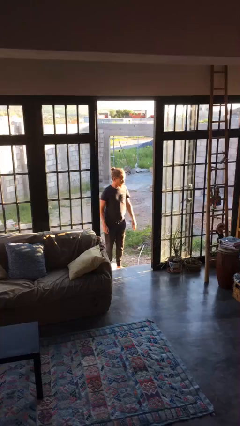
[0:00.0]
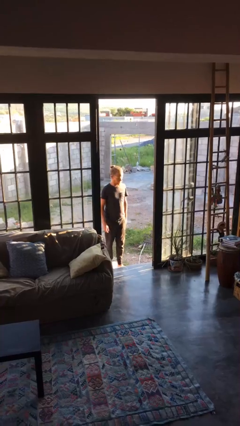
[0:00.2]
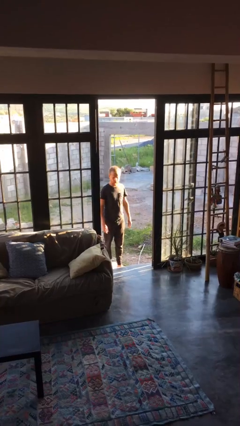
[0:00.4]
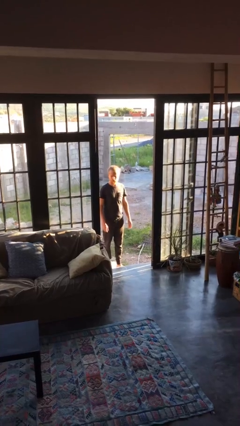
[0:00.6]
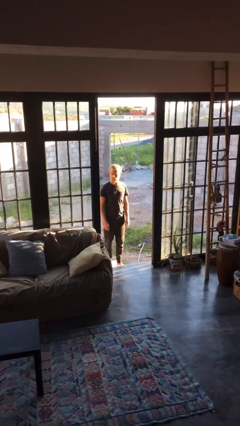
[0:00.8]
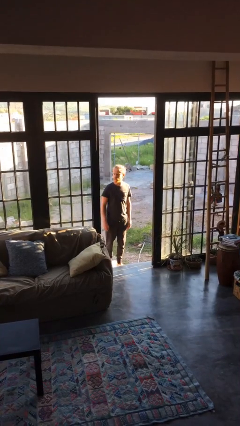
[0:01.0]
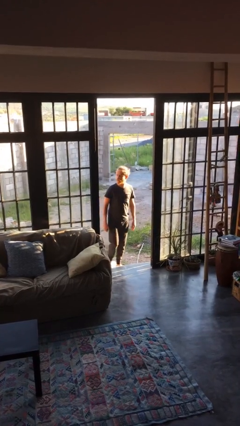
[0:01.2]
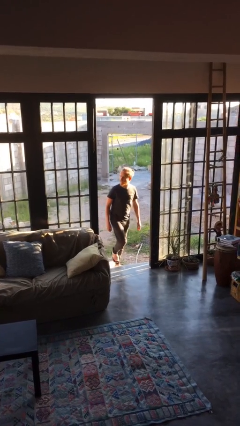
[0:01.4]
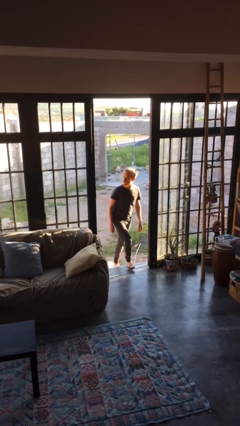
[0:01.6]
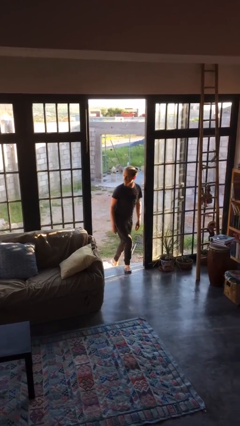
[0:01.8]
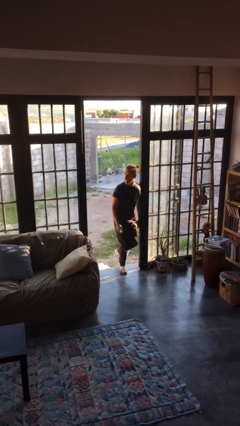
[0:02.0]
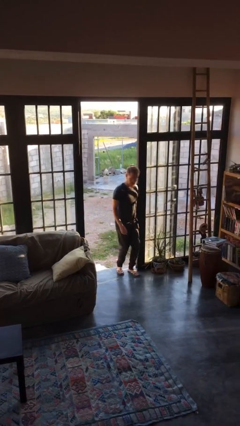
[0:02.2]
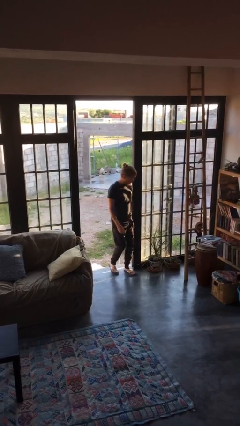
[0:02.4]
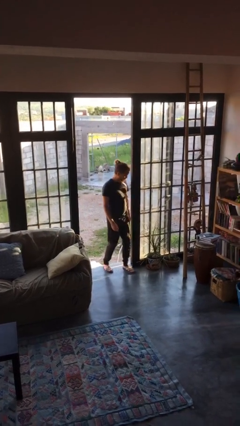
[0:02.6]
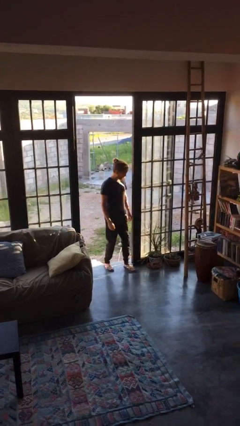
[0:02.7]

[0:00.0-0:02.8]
person bumps into wall

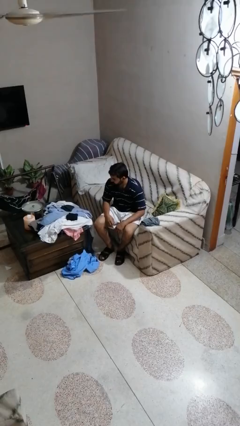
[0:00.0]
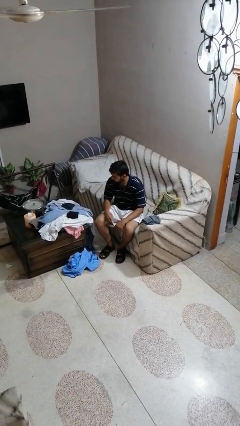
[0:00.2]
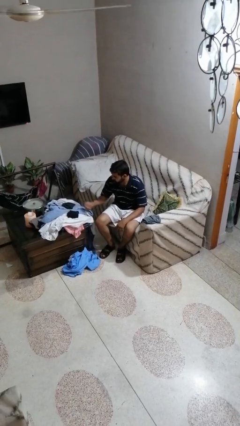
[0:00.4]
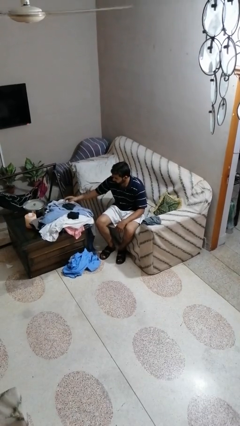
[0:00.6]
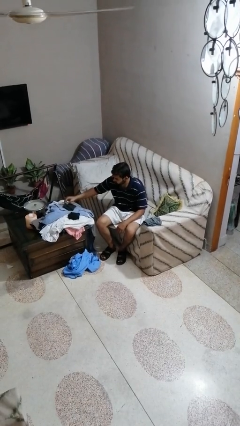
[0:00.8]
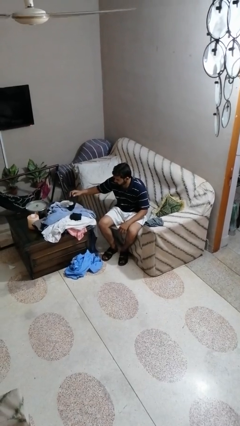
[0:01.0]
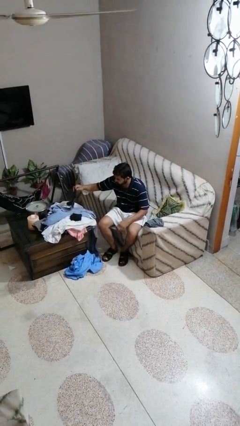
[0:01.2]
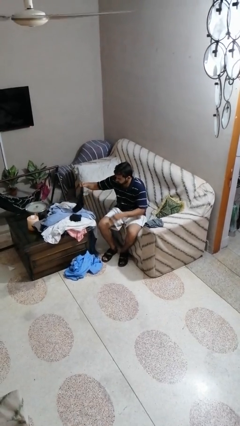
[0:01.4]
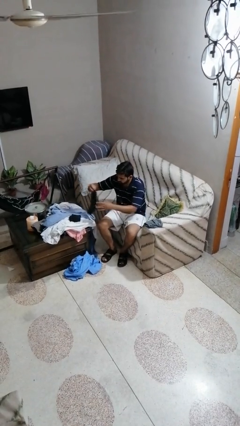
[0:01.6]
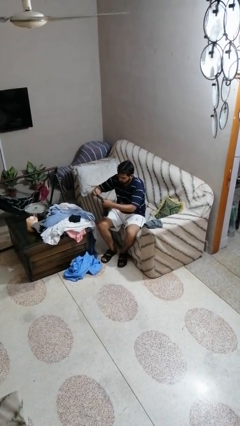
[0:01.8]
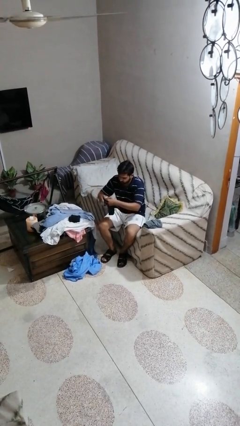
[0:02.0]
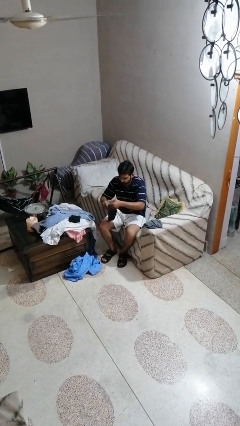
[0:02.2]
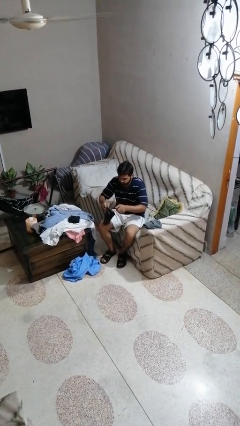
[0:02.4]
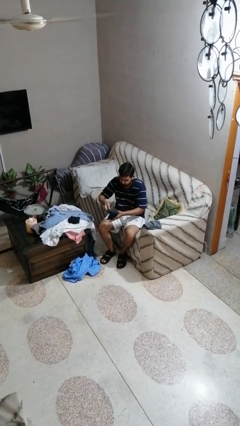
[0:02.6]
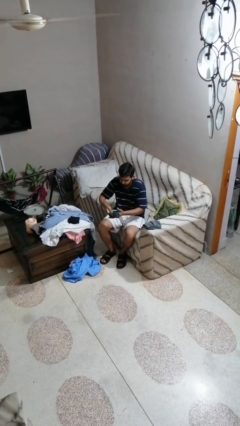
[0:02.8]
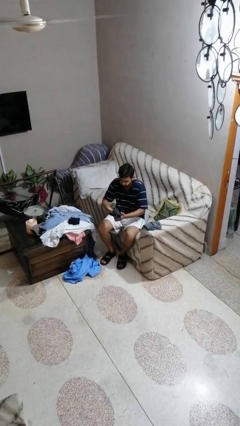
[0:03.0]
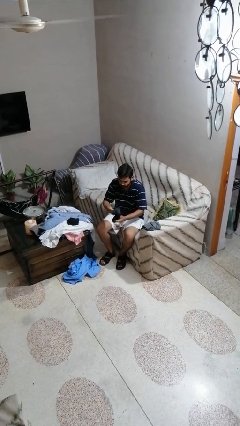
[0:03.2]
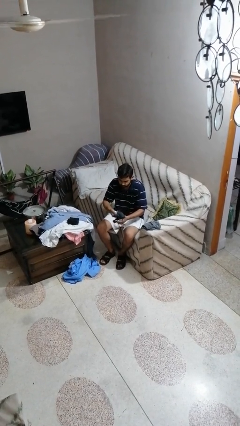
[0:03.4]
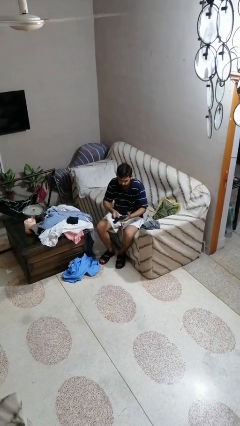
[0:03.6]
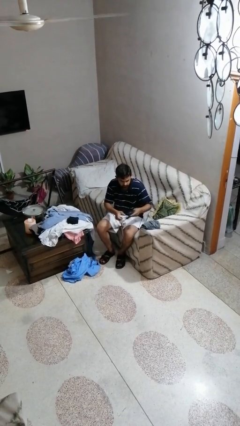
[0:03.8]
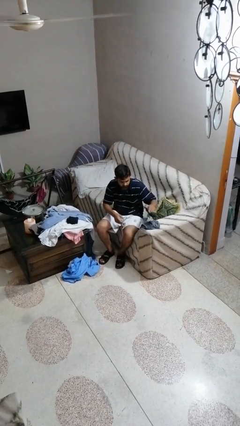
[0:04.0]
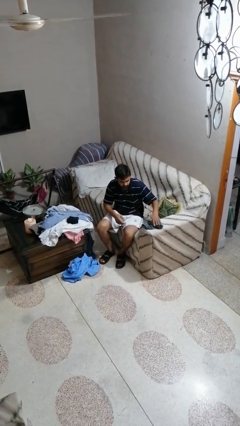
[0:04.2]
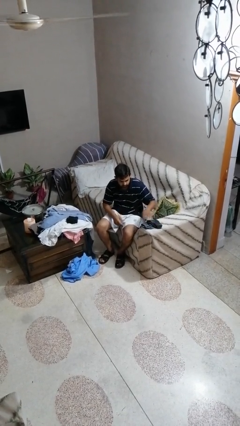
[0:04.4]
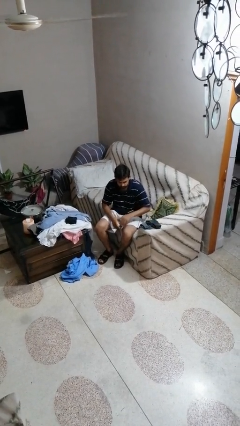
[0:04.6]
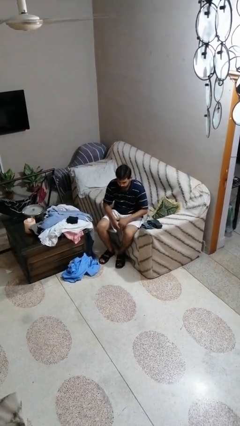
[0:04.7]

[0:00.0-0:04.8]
person folds socks

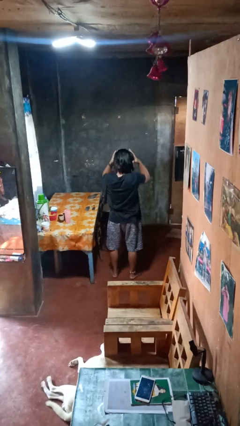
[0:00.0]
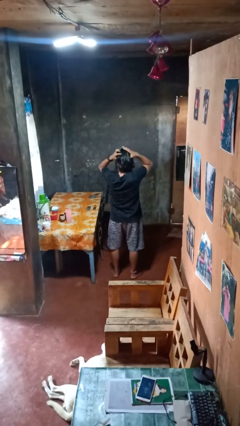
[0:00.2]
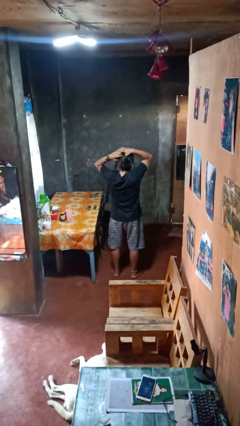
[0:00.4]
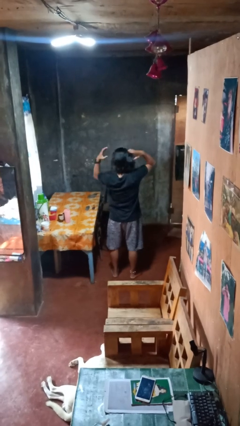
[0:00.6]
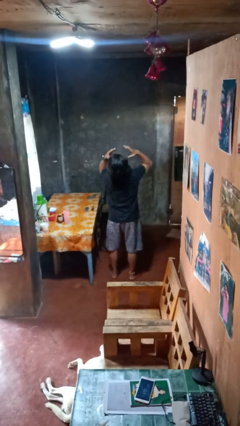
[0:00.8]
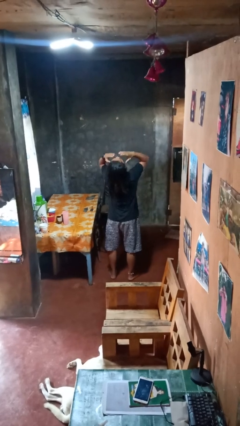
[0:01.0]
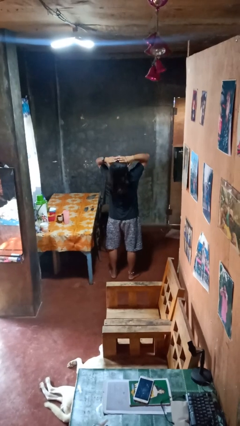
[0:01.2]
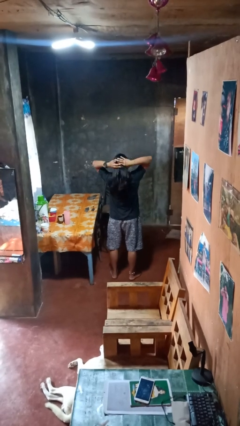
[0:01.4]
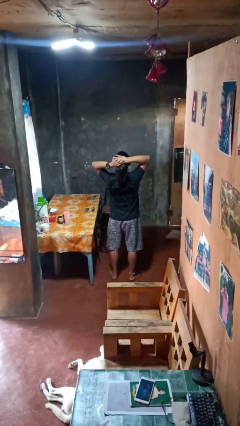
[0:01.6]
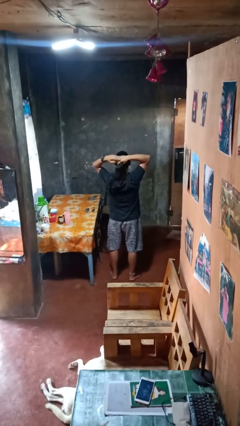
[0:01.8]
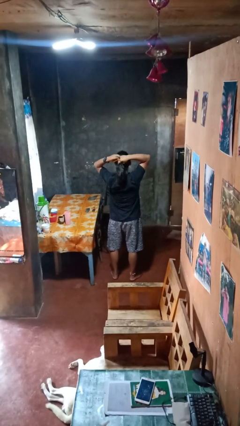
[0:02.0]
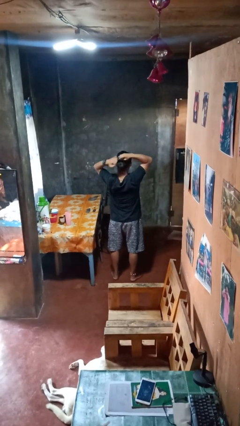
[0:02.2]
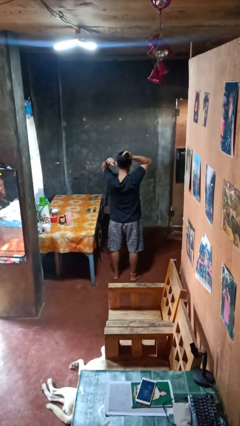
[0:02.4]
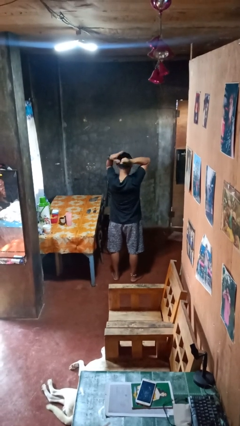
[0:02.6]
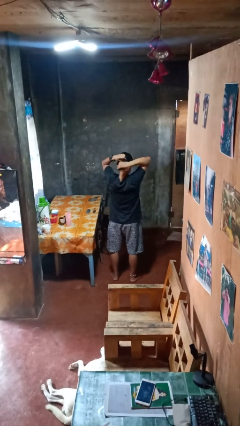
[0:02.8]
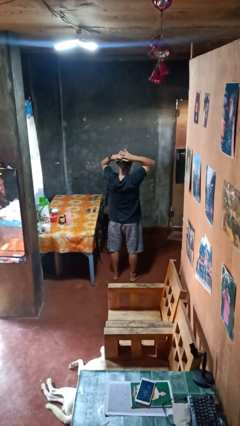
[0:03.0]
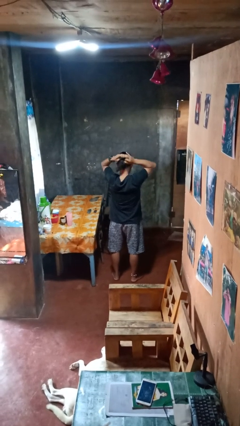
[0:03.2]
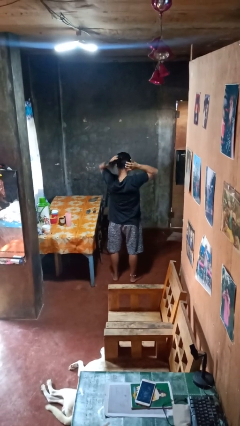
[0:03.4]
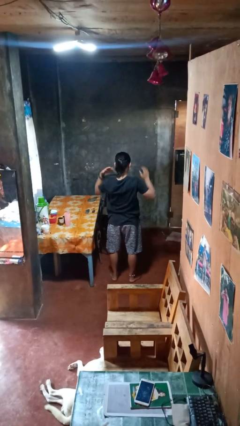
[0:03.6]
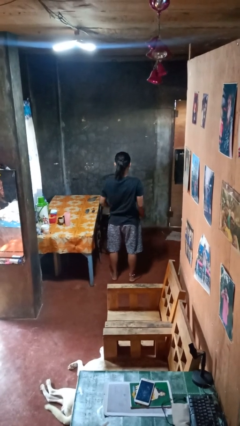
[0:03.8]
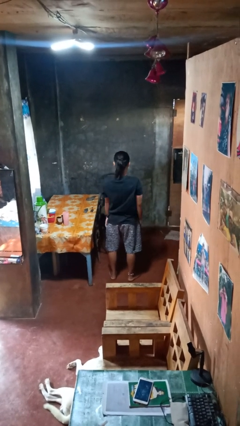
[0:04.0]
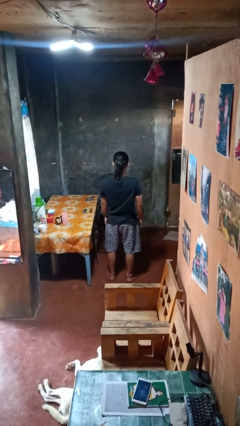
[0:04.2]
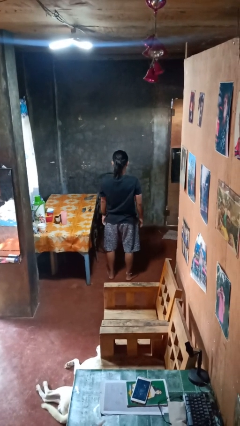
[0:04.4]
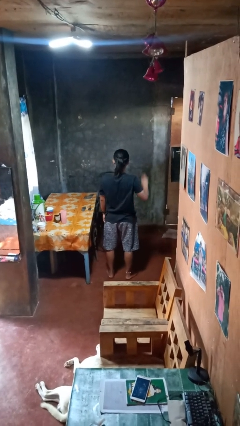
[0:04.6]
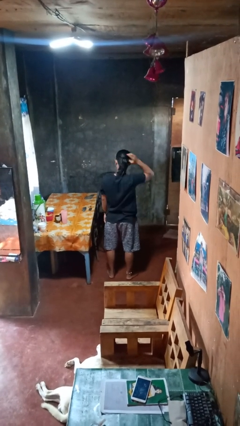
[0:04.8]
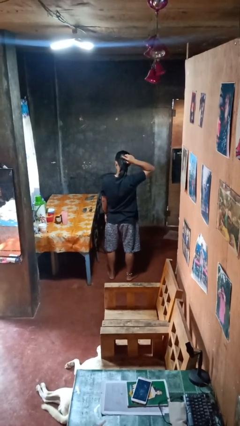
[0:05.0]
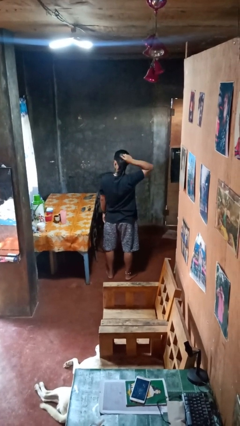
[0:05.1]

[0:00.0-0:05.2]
person puts hair in ponytail

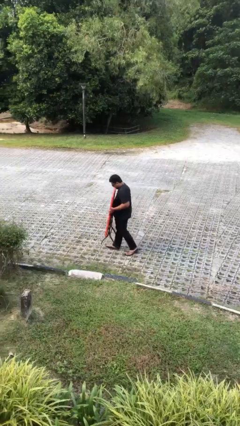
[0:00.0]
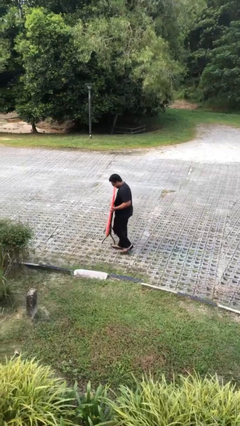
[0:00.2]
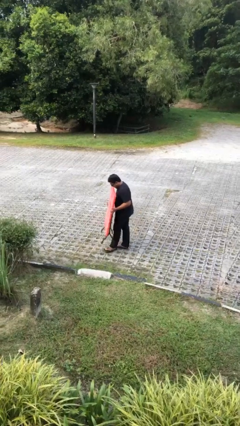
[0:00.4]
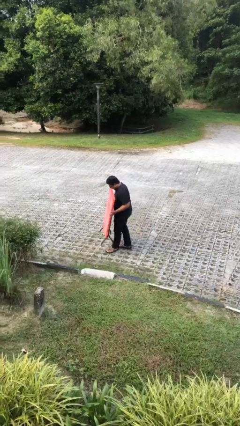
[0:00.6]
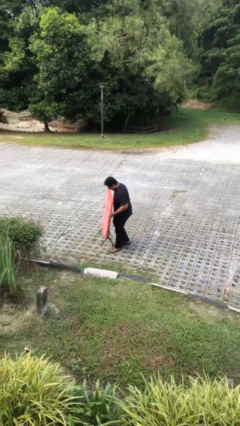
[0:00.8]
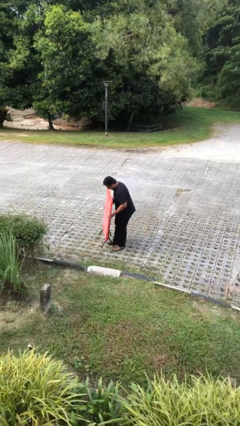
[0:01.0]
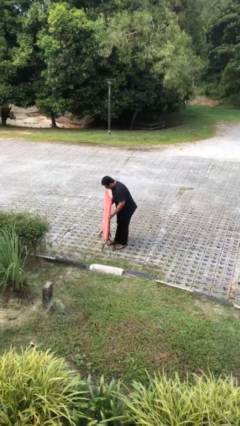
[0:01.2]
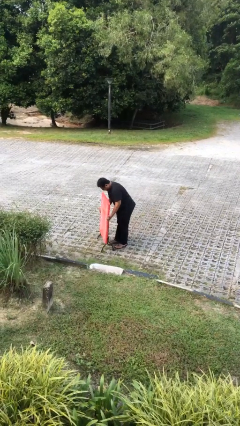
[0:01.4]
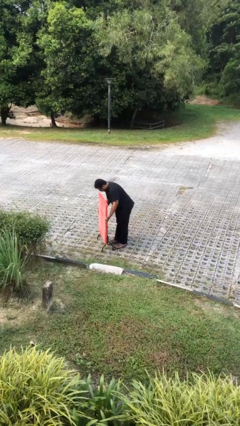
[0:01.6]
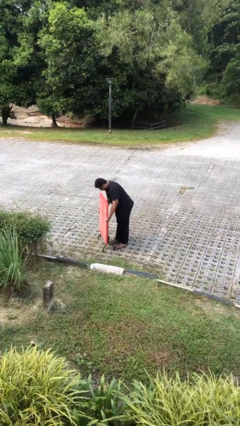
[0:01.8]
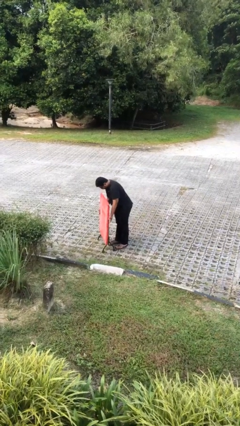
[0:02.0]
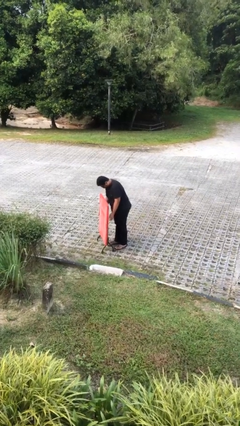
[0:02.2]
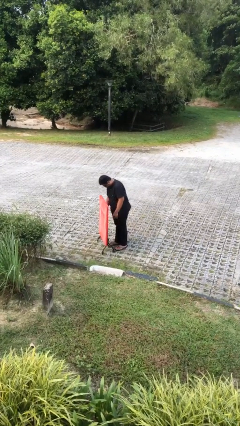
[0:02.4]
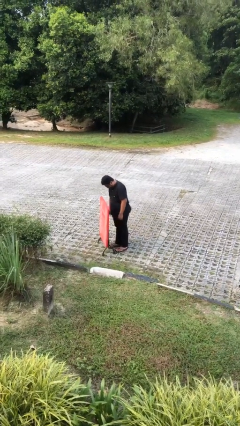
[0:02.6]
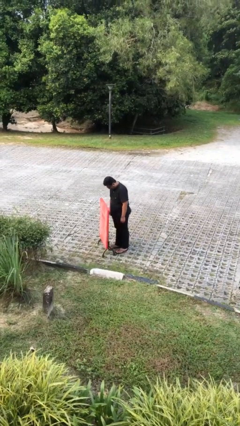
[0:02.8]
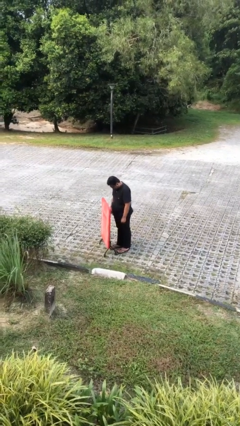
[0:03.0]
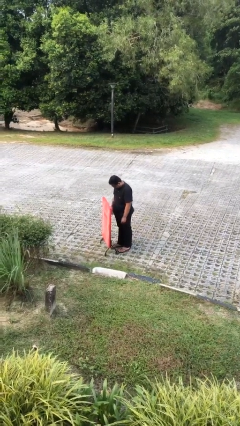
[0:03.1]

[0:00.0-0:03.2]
person puts down object on floor

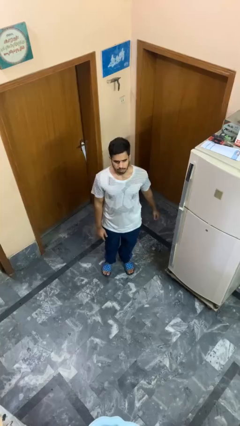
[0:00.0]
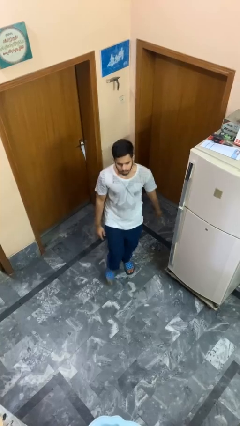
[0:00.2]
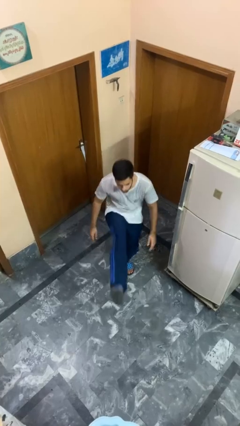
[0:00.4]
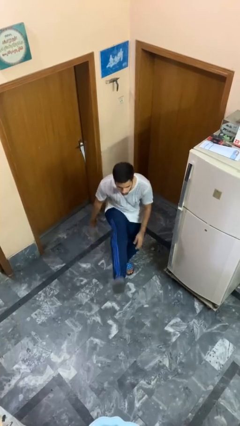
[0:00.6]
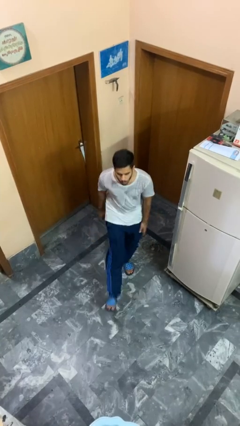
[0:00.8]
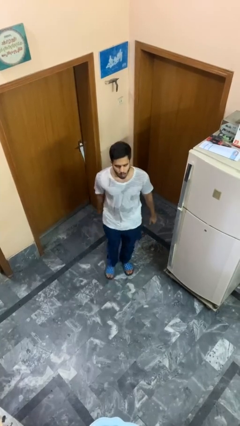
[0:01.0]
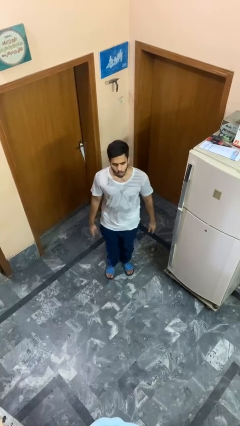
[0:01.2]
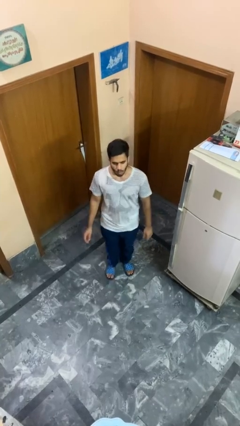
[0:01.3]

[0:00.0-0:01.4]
person karate kicks

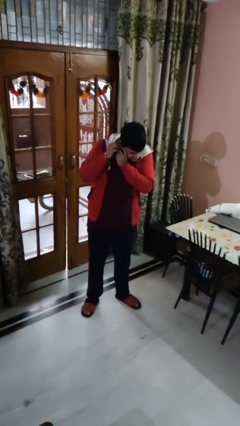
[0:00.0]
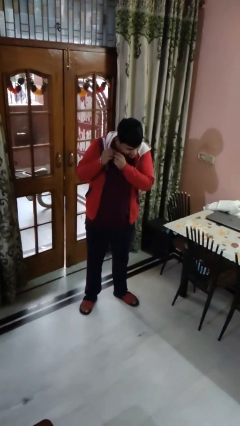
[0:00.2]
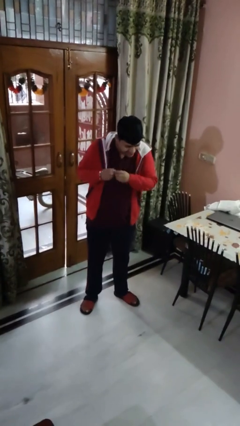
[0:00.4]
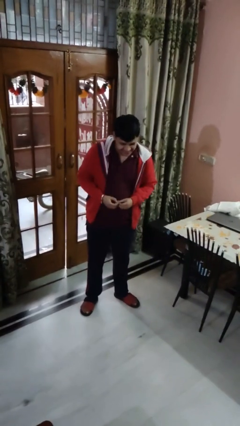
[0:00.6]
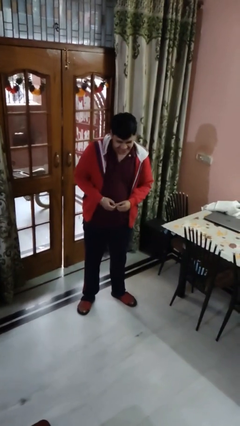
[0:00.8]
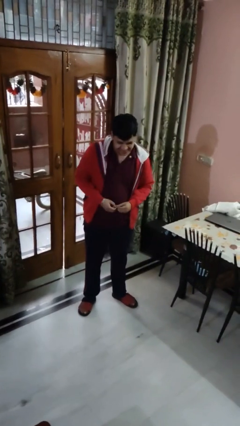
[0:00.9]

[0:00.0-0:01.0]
person takes off earrings
